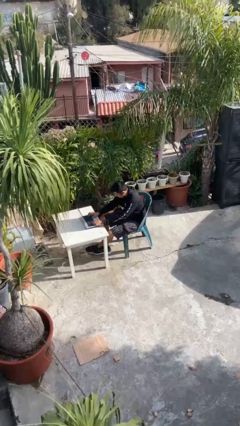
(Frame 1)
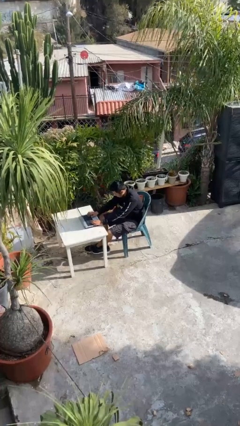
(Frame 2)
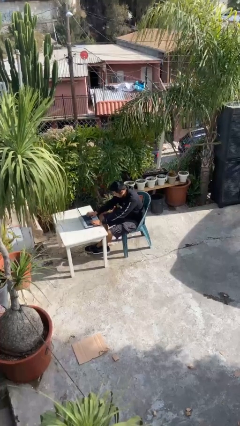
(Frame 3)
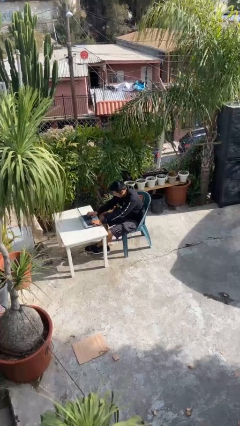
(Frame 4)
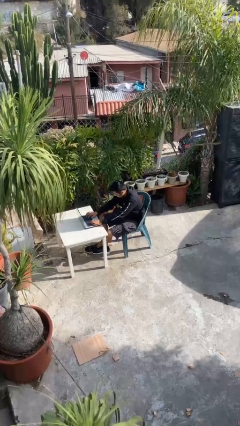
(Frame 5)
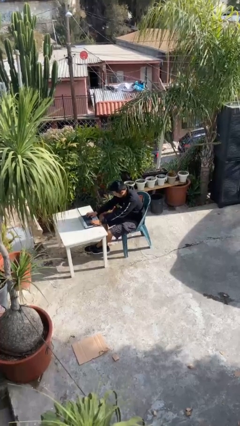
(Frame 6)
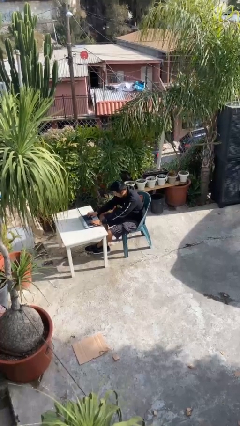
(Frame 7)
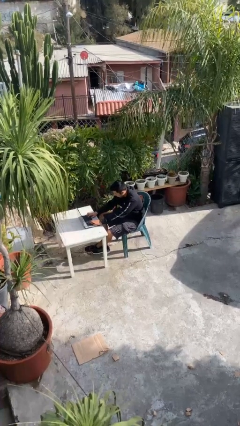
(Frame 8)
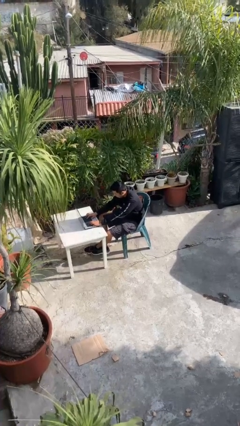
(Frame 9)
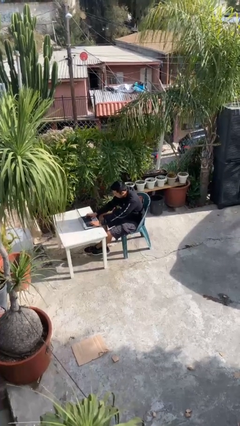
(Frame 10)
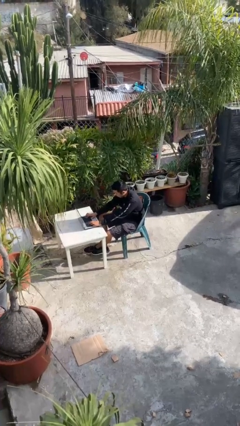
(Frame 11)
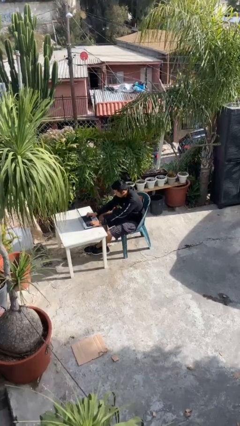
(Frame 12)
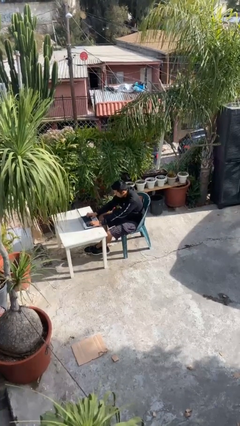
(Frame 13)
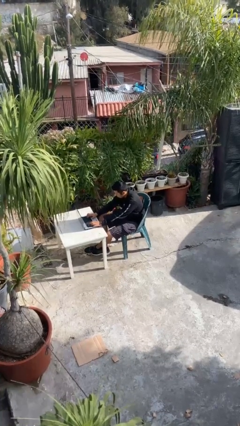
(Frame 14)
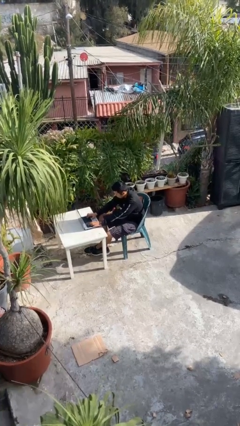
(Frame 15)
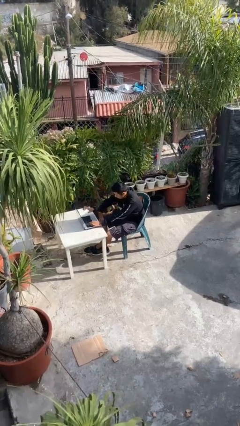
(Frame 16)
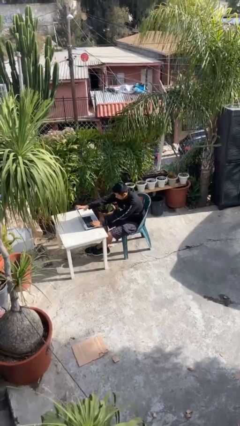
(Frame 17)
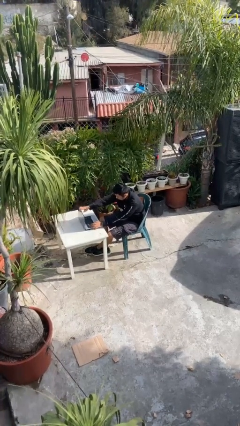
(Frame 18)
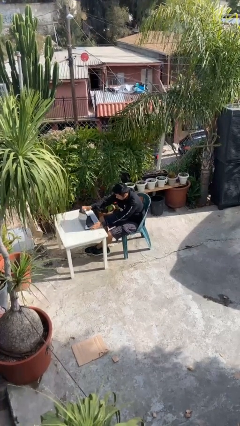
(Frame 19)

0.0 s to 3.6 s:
person interacts with laptop

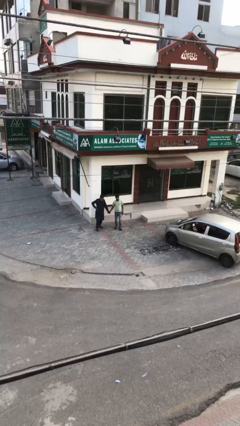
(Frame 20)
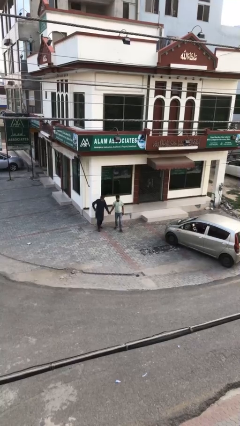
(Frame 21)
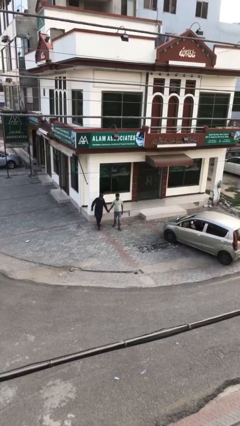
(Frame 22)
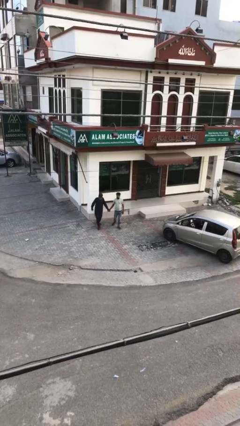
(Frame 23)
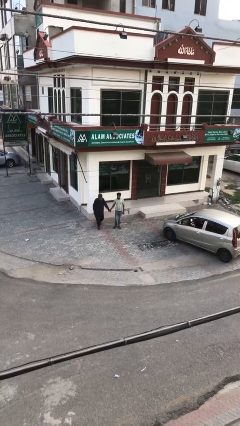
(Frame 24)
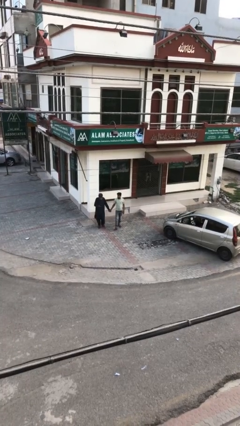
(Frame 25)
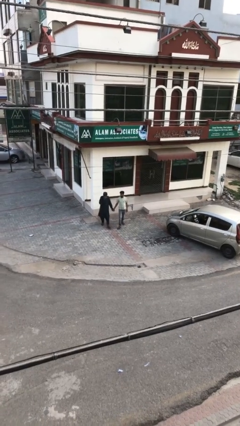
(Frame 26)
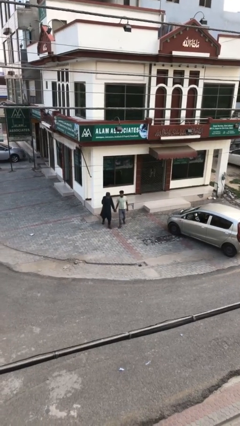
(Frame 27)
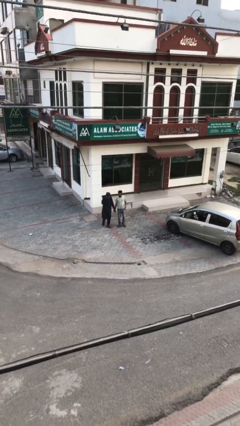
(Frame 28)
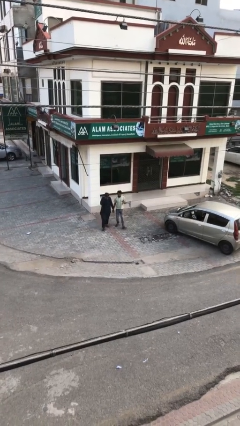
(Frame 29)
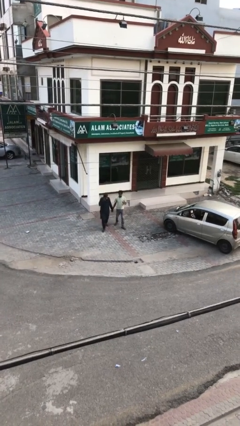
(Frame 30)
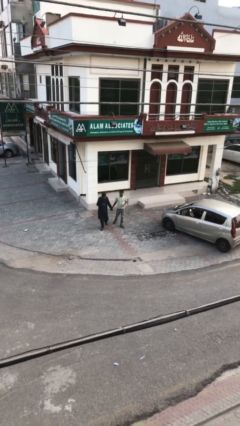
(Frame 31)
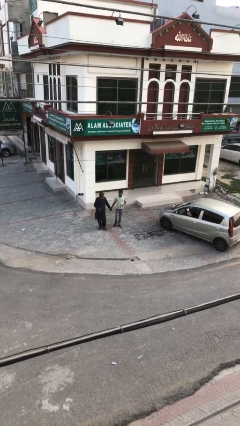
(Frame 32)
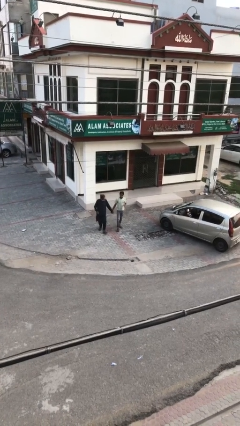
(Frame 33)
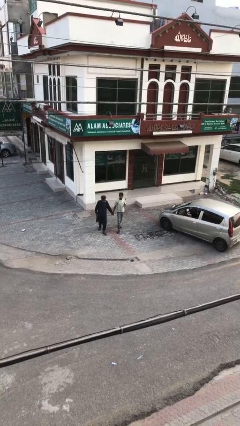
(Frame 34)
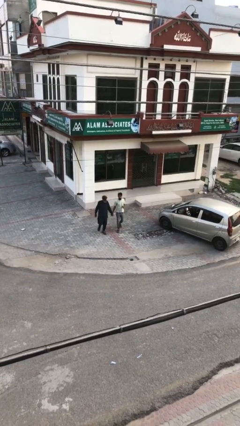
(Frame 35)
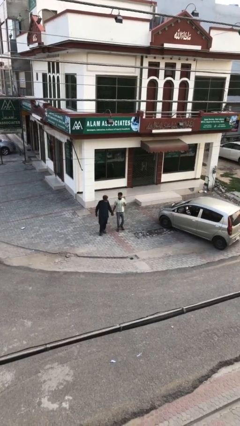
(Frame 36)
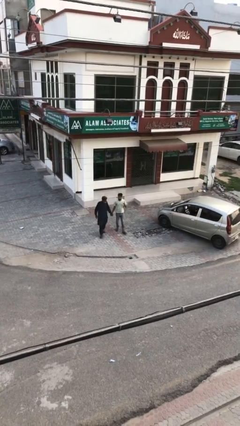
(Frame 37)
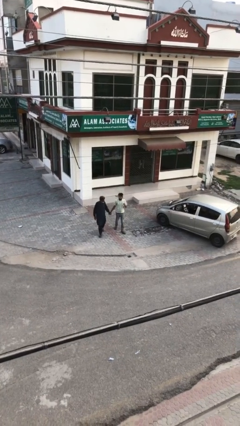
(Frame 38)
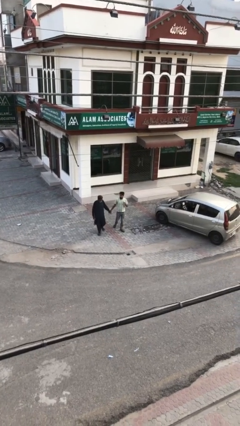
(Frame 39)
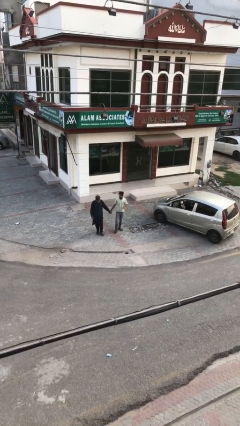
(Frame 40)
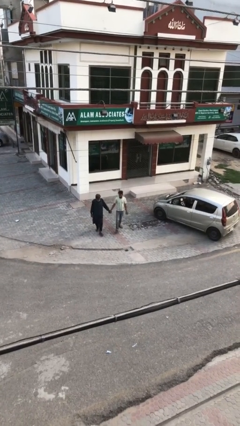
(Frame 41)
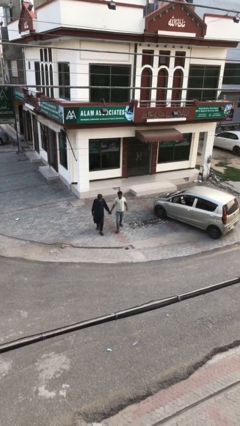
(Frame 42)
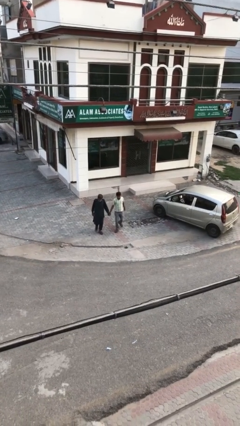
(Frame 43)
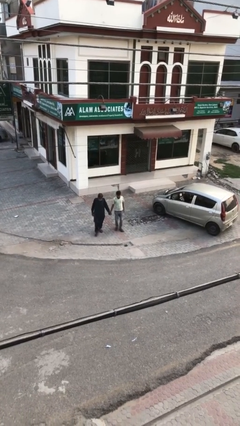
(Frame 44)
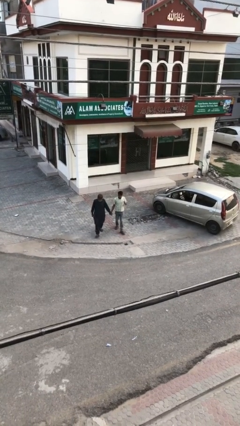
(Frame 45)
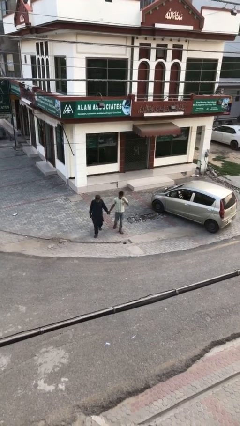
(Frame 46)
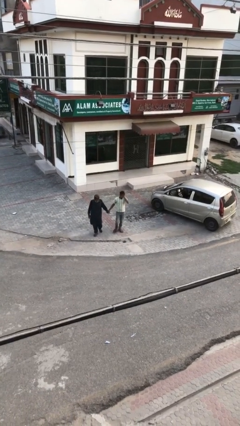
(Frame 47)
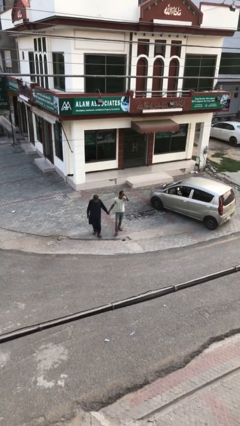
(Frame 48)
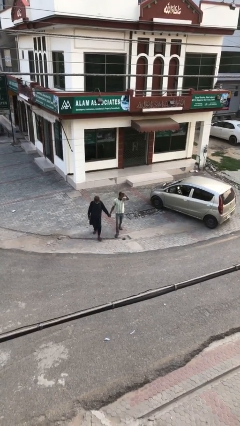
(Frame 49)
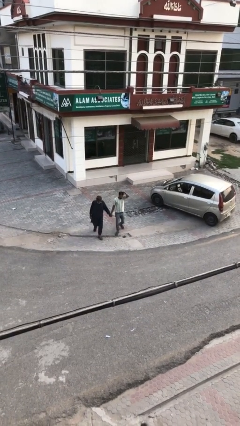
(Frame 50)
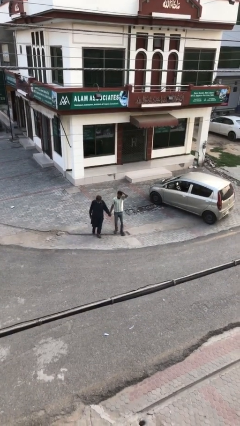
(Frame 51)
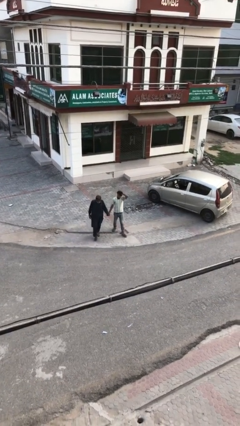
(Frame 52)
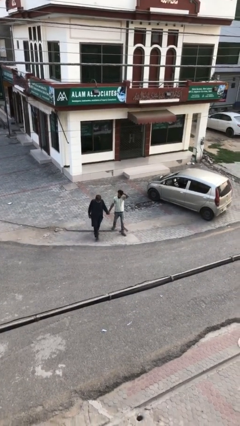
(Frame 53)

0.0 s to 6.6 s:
person holds hand

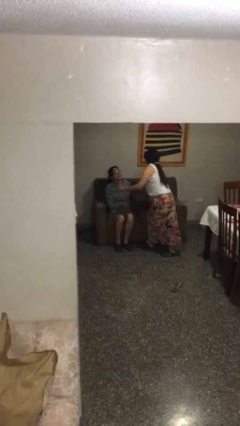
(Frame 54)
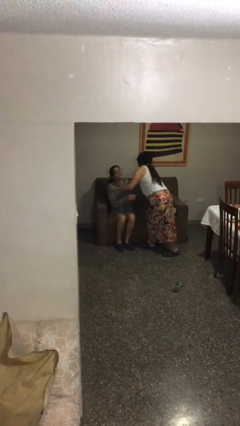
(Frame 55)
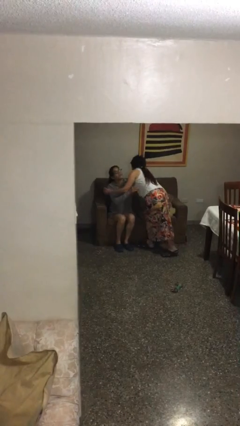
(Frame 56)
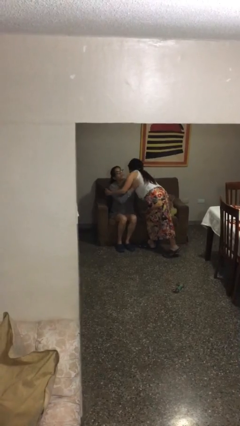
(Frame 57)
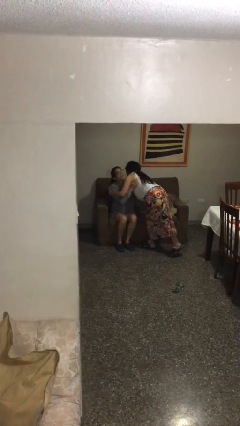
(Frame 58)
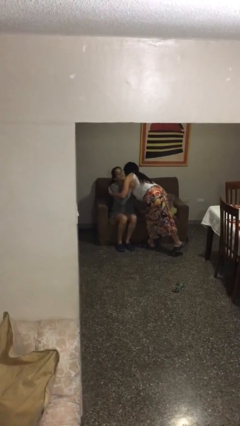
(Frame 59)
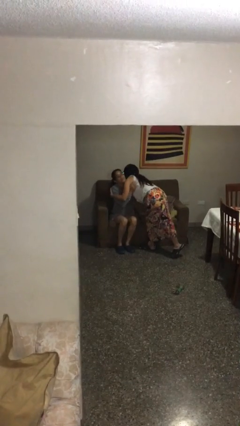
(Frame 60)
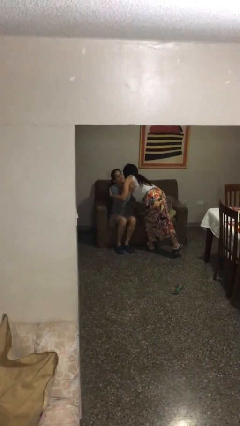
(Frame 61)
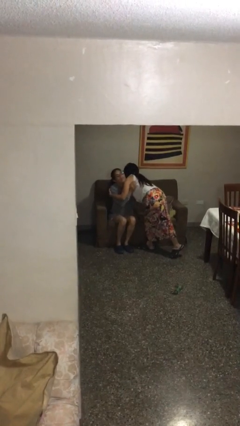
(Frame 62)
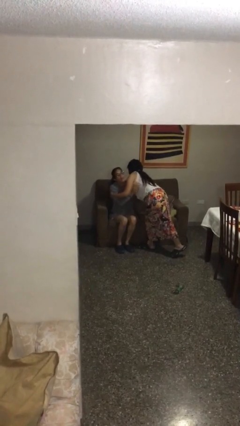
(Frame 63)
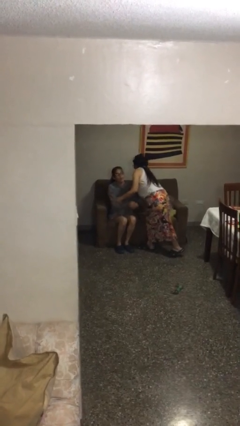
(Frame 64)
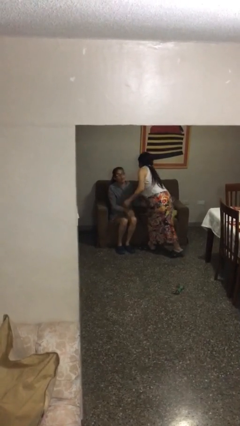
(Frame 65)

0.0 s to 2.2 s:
person embraces person

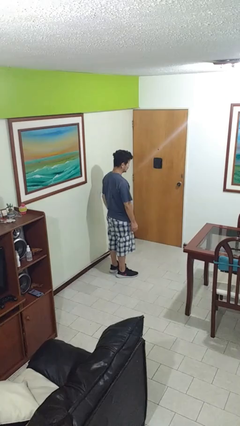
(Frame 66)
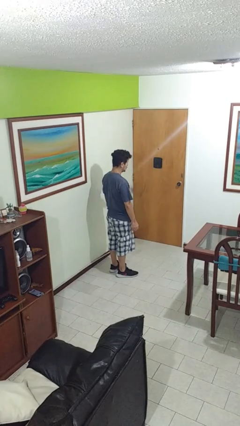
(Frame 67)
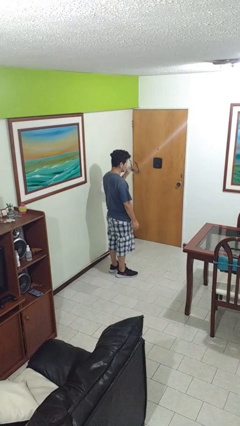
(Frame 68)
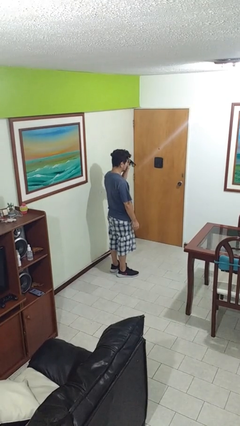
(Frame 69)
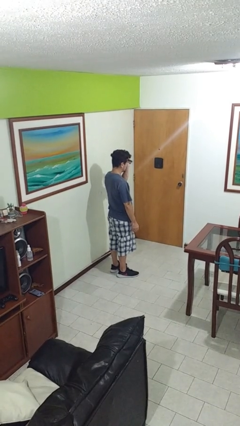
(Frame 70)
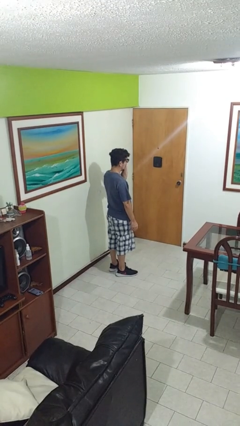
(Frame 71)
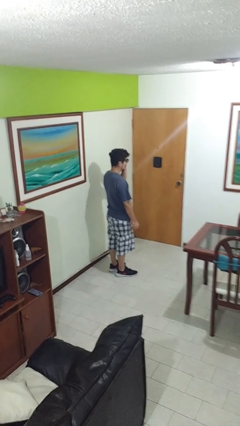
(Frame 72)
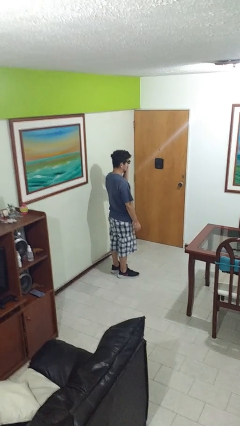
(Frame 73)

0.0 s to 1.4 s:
person puts on sunglasses

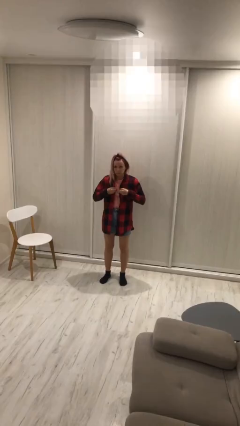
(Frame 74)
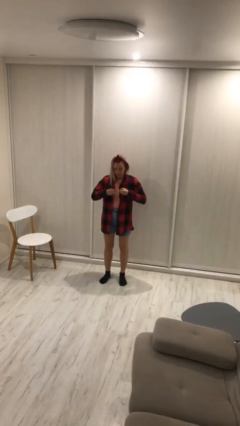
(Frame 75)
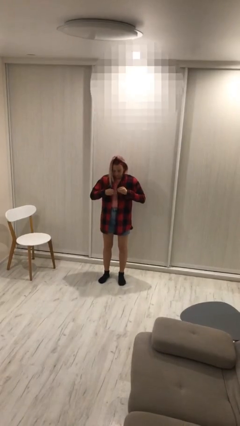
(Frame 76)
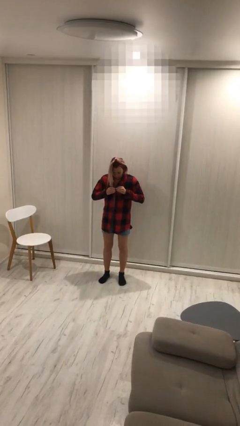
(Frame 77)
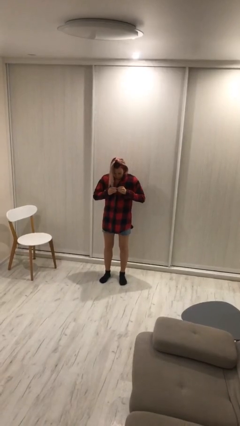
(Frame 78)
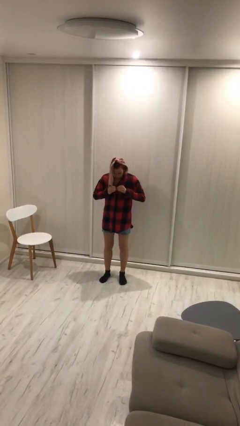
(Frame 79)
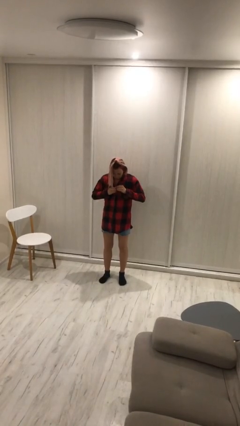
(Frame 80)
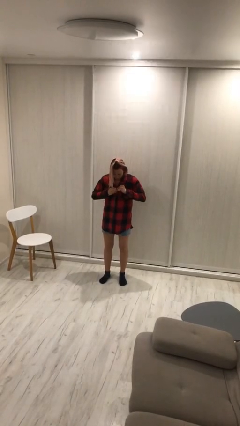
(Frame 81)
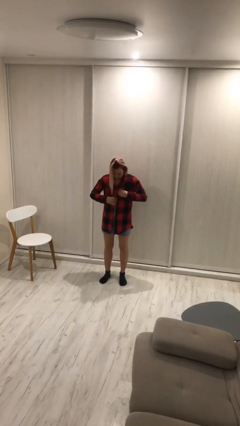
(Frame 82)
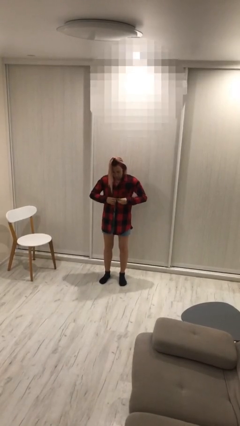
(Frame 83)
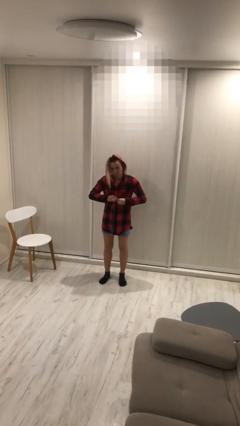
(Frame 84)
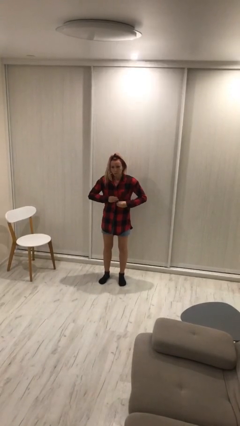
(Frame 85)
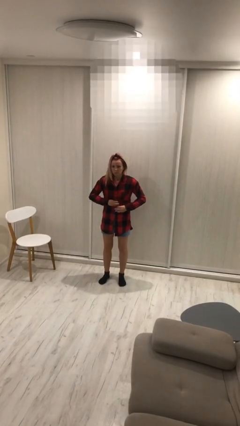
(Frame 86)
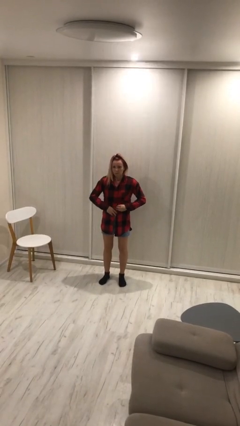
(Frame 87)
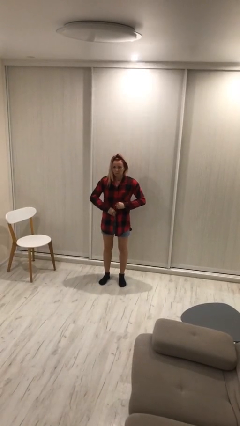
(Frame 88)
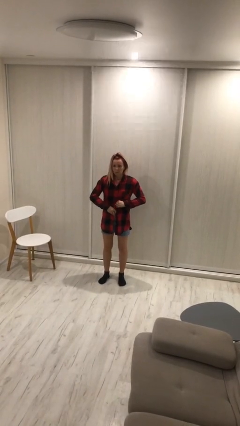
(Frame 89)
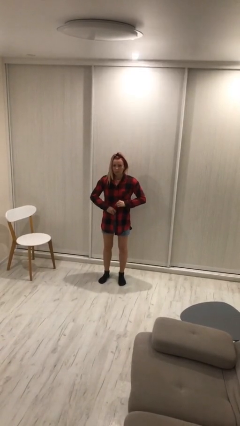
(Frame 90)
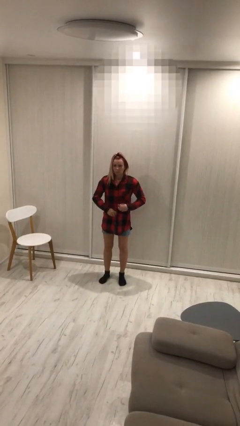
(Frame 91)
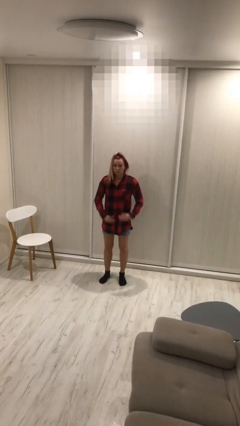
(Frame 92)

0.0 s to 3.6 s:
person buttons shirt
